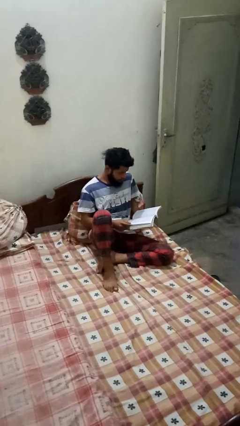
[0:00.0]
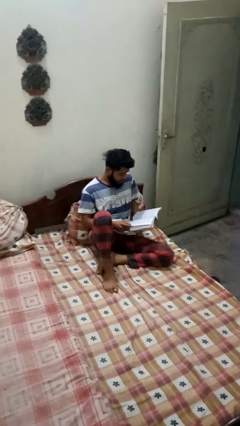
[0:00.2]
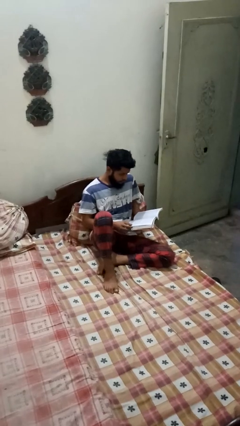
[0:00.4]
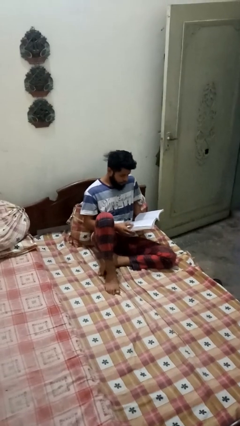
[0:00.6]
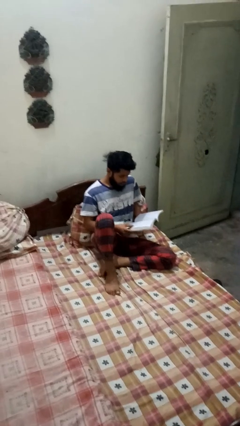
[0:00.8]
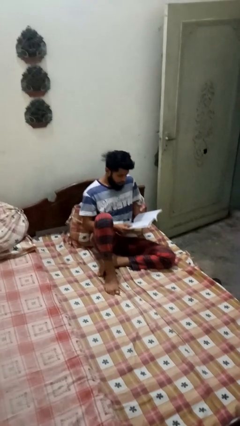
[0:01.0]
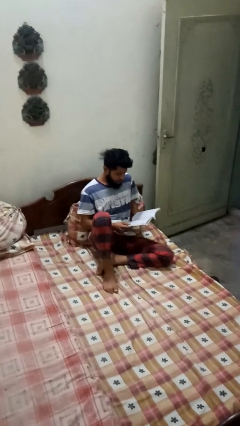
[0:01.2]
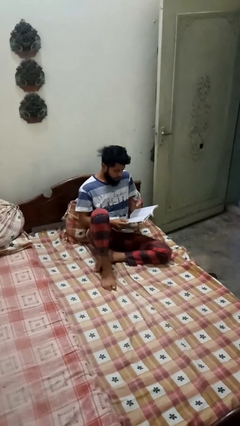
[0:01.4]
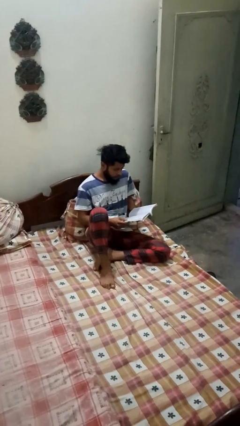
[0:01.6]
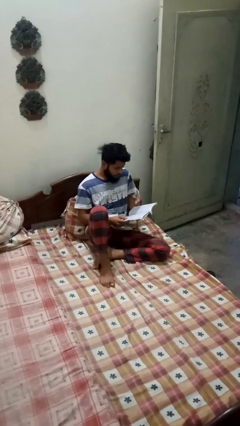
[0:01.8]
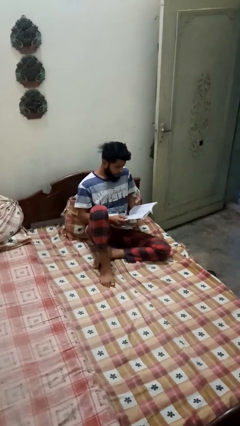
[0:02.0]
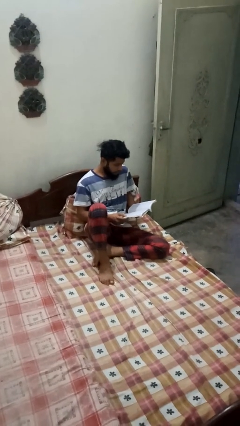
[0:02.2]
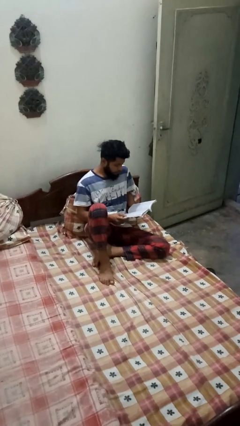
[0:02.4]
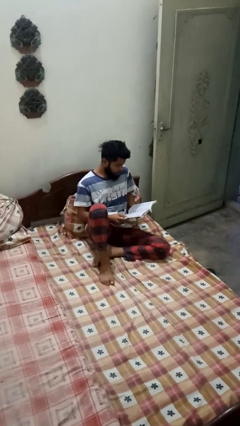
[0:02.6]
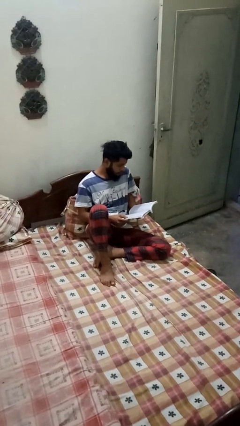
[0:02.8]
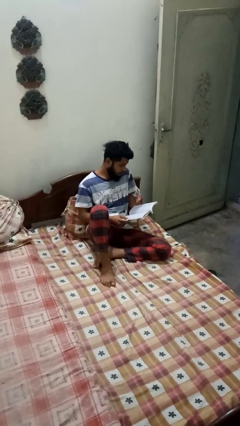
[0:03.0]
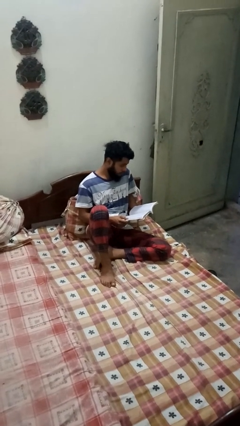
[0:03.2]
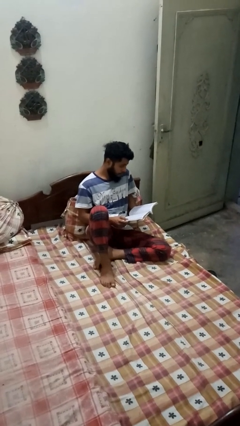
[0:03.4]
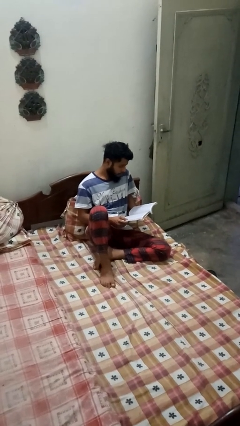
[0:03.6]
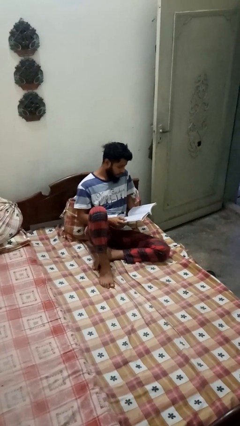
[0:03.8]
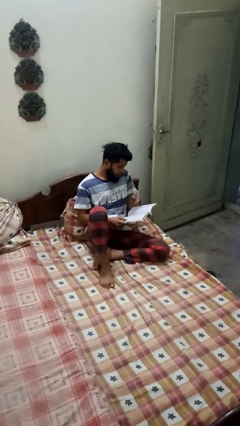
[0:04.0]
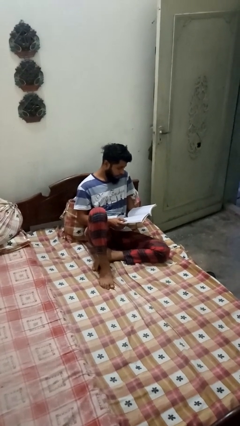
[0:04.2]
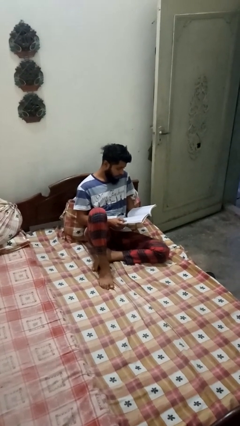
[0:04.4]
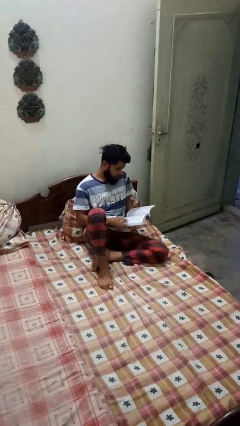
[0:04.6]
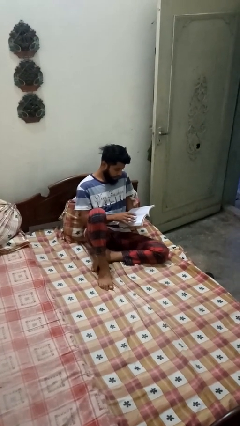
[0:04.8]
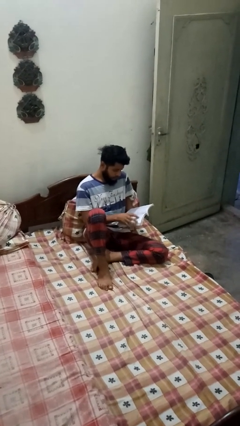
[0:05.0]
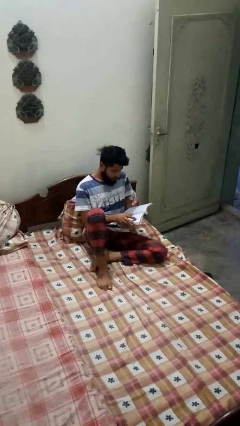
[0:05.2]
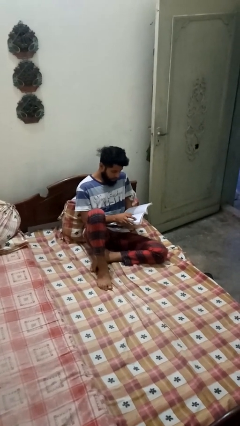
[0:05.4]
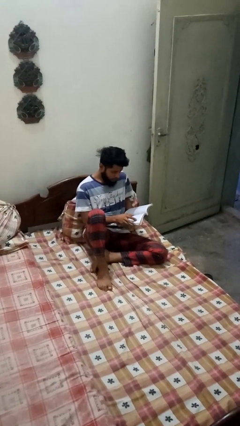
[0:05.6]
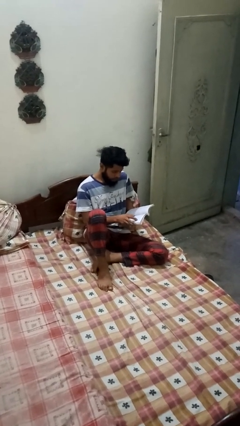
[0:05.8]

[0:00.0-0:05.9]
person reads book

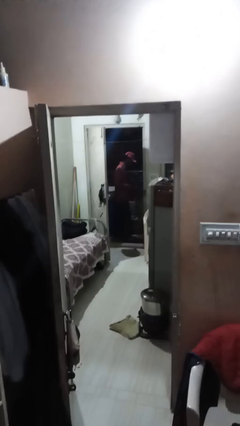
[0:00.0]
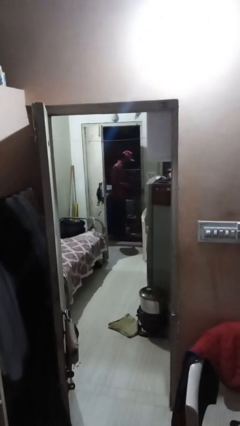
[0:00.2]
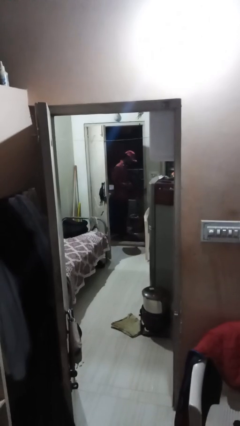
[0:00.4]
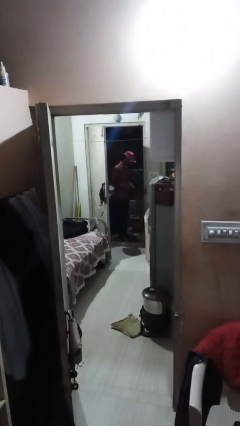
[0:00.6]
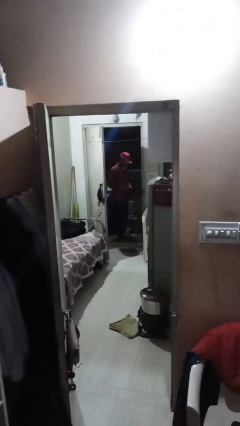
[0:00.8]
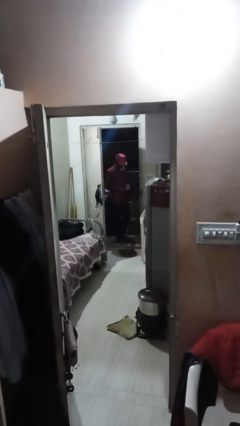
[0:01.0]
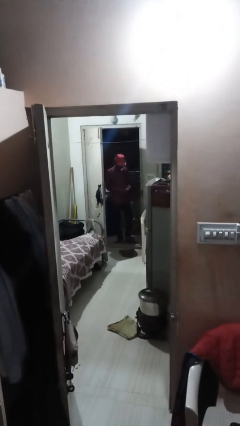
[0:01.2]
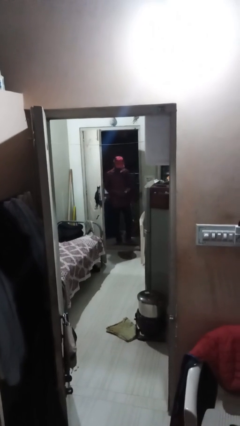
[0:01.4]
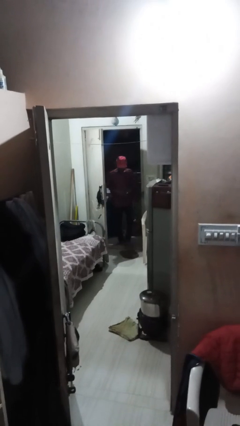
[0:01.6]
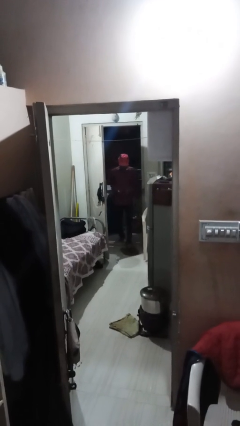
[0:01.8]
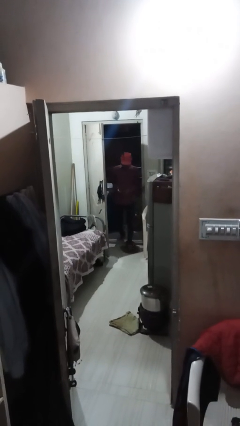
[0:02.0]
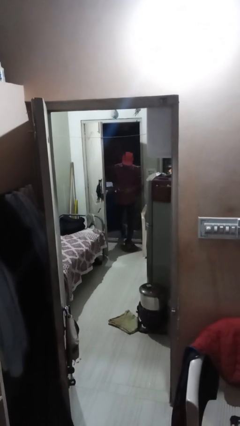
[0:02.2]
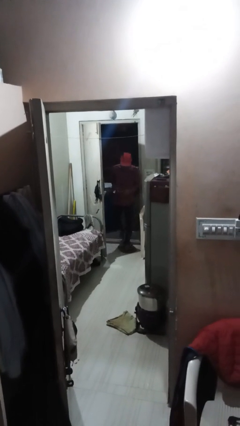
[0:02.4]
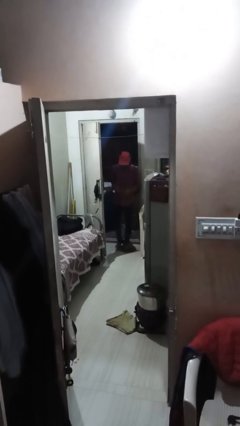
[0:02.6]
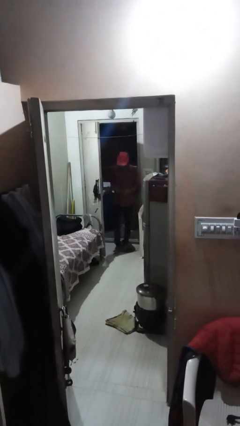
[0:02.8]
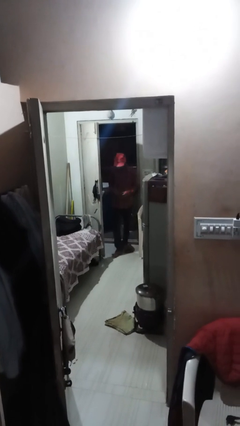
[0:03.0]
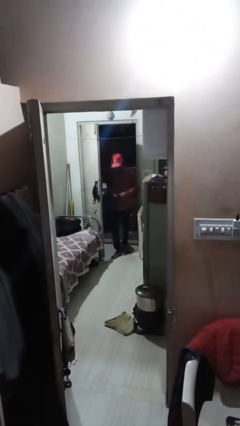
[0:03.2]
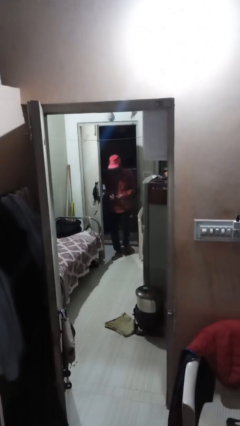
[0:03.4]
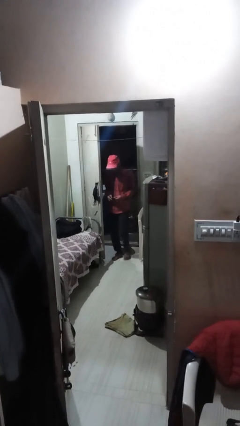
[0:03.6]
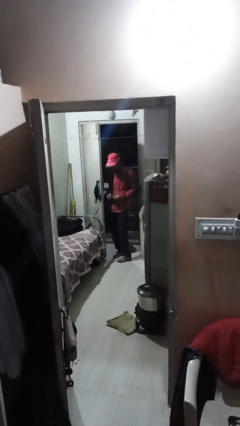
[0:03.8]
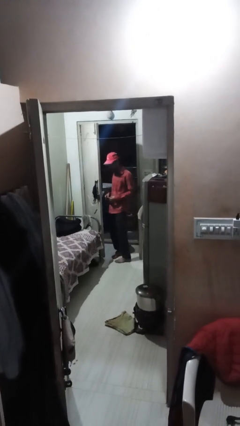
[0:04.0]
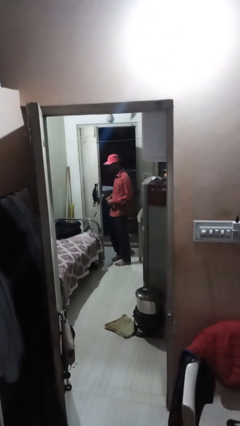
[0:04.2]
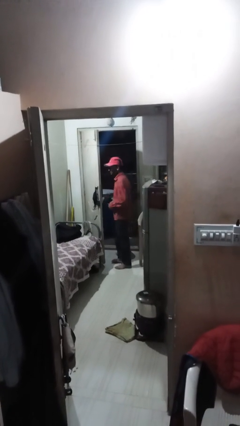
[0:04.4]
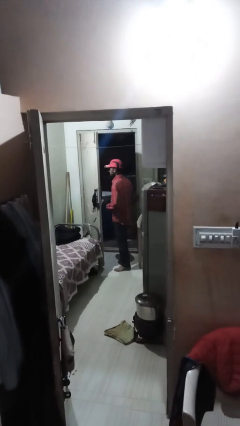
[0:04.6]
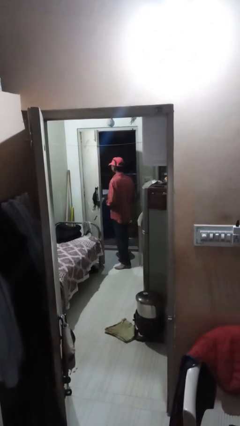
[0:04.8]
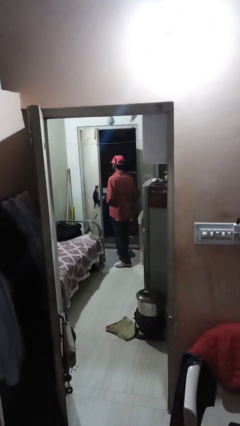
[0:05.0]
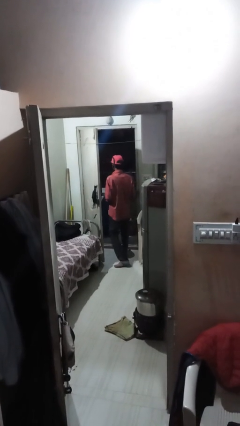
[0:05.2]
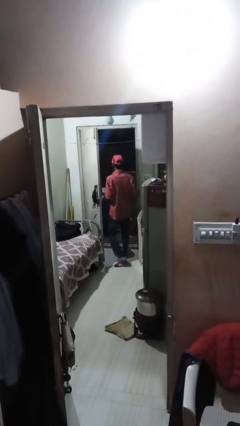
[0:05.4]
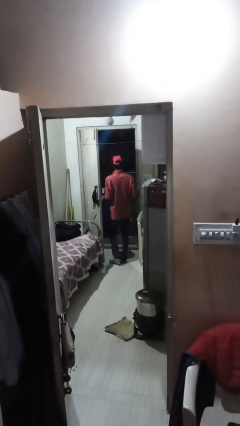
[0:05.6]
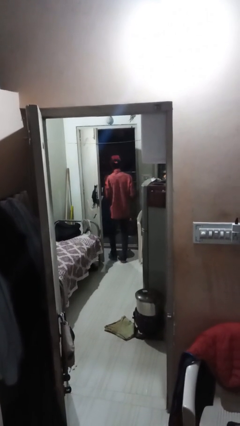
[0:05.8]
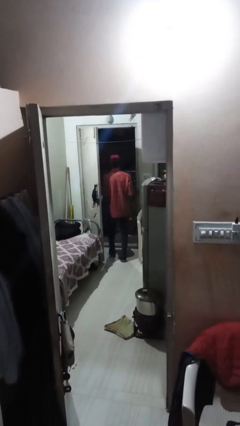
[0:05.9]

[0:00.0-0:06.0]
person enters scene through structure

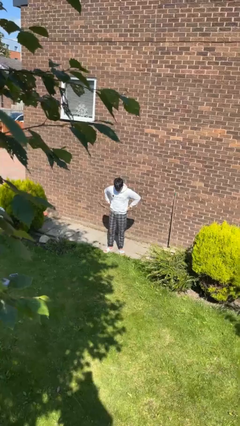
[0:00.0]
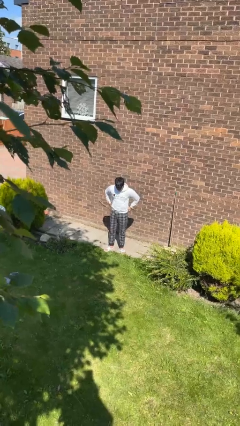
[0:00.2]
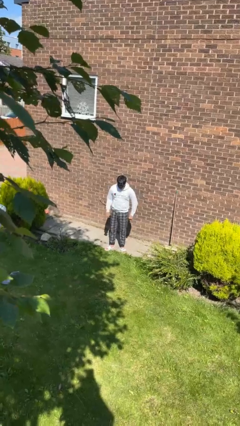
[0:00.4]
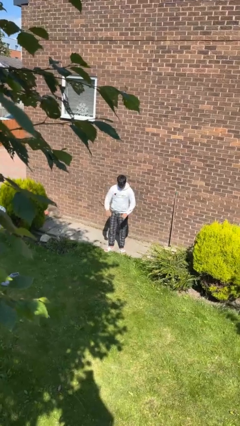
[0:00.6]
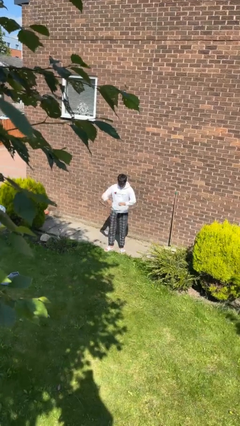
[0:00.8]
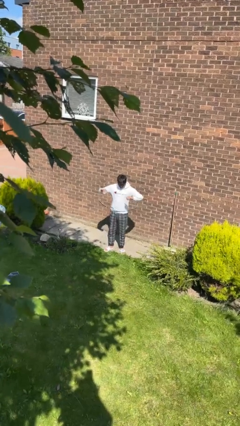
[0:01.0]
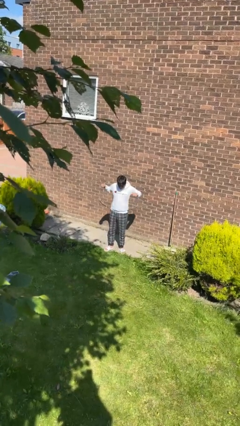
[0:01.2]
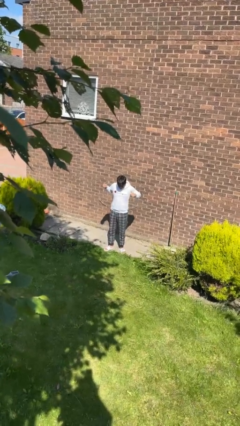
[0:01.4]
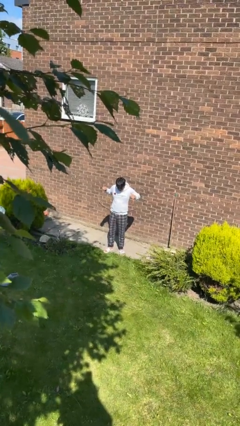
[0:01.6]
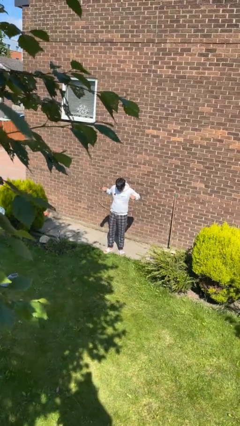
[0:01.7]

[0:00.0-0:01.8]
person stretches arms to side

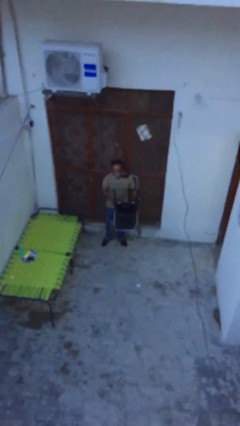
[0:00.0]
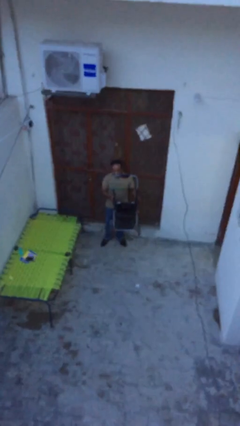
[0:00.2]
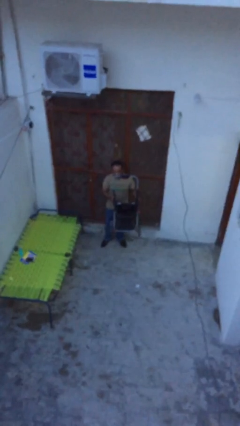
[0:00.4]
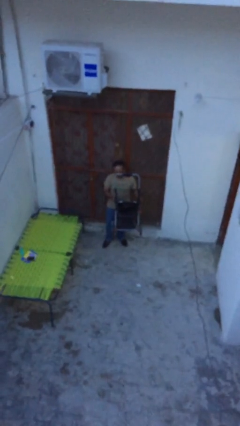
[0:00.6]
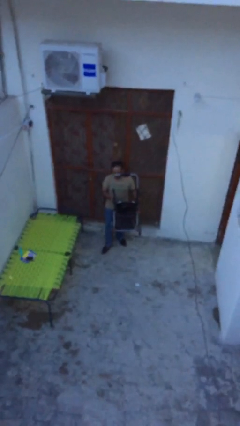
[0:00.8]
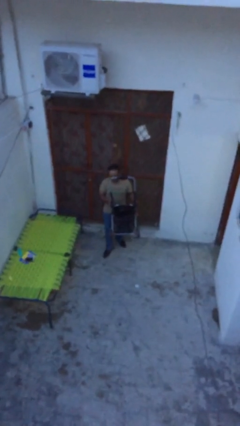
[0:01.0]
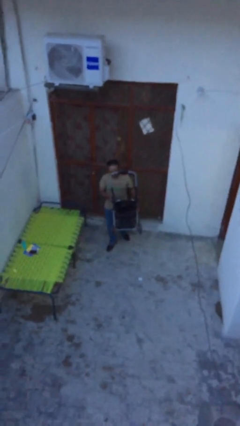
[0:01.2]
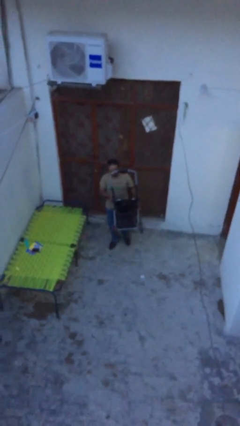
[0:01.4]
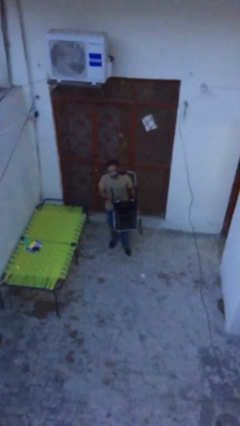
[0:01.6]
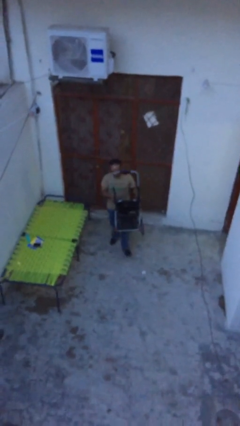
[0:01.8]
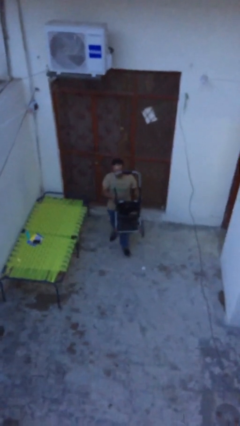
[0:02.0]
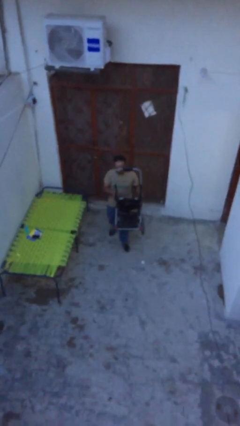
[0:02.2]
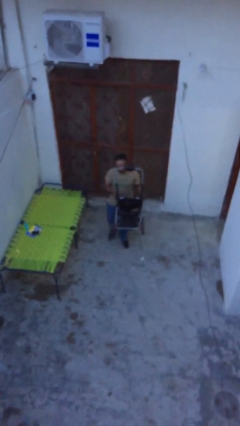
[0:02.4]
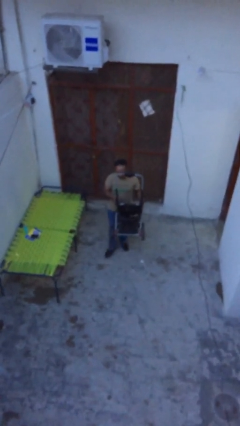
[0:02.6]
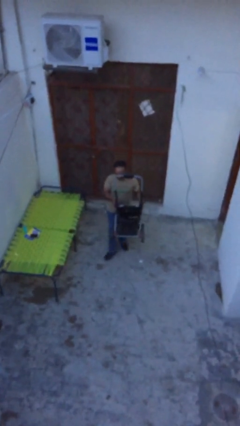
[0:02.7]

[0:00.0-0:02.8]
person carries heavy object

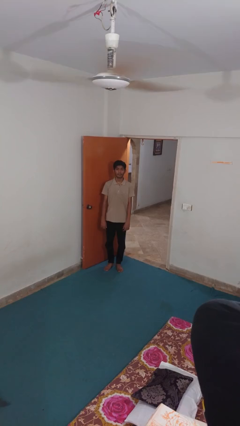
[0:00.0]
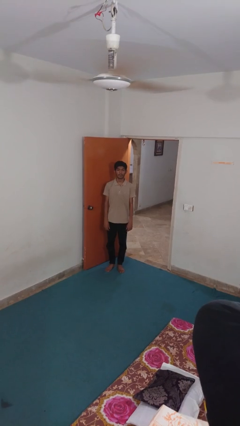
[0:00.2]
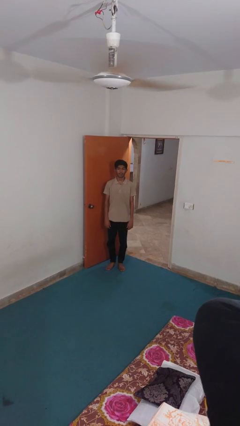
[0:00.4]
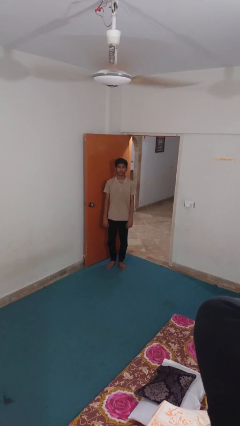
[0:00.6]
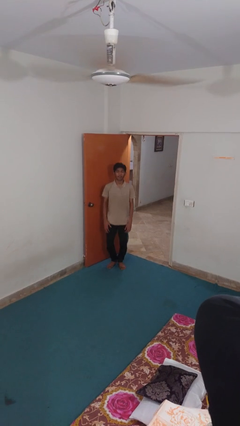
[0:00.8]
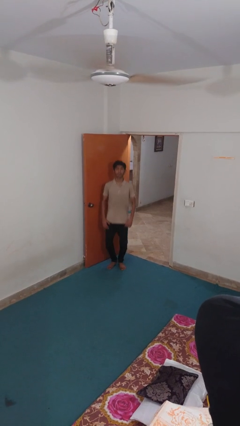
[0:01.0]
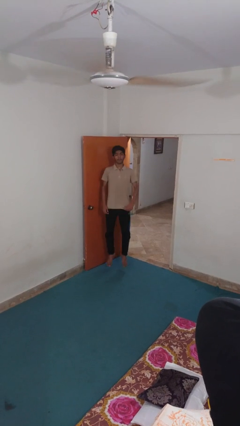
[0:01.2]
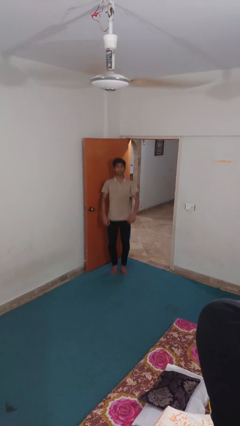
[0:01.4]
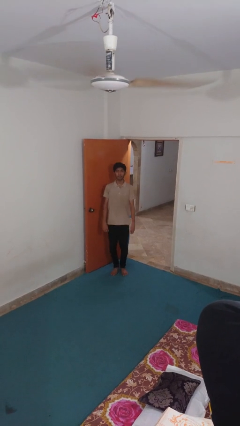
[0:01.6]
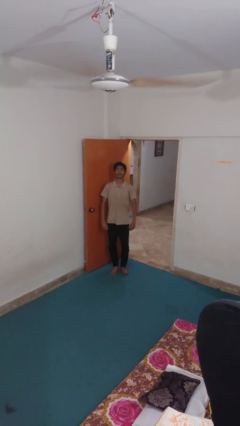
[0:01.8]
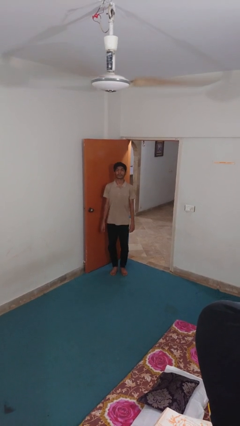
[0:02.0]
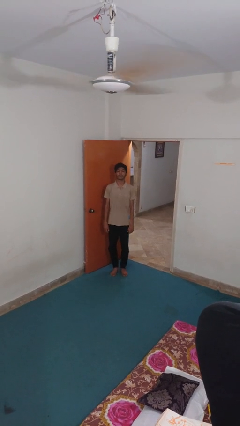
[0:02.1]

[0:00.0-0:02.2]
person jumps
